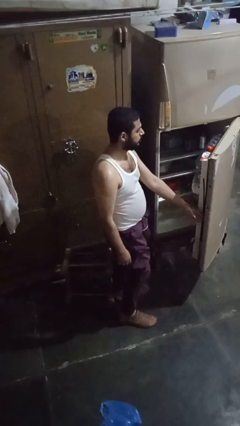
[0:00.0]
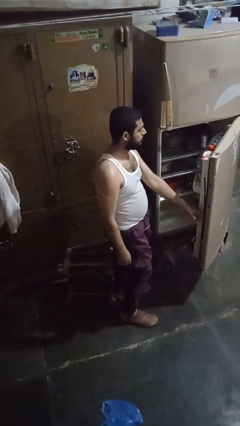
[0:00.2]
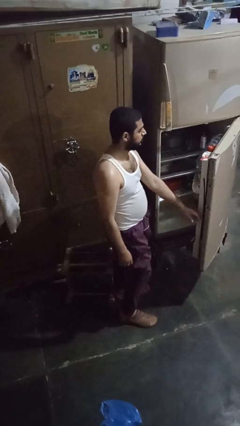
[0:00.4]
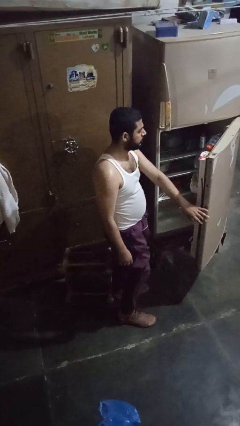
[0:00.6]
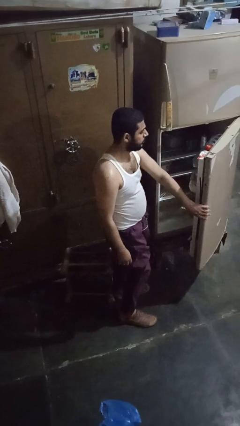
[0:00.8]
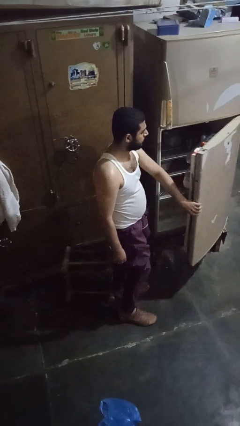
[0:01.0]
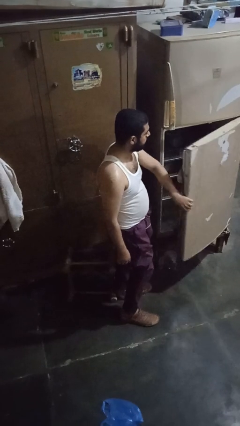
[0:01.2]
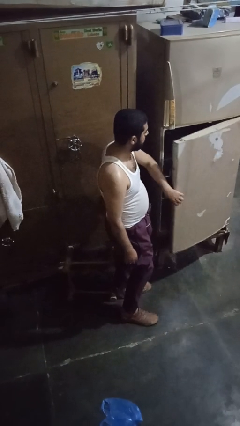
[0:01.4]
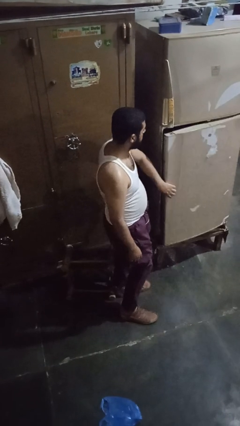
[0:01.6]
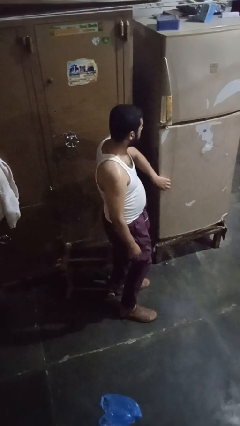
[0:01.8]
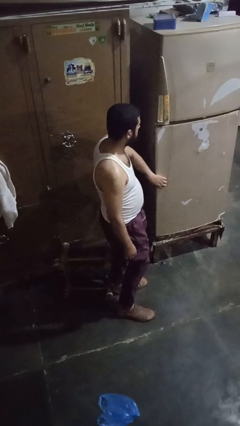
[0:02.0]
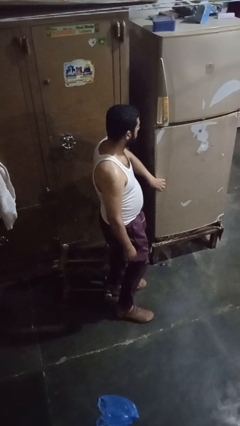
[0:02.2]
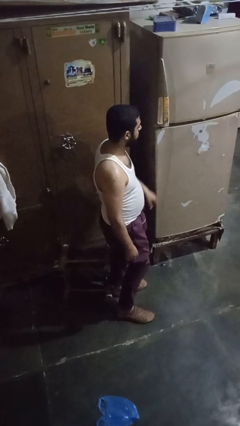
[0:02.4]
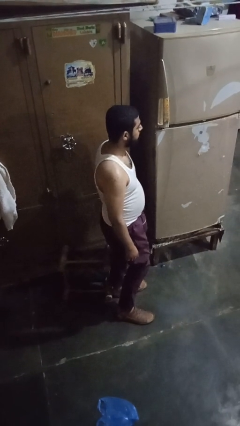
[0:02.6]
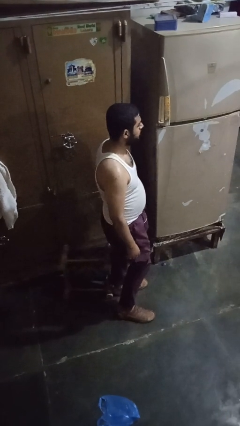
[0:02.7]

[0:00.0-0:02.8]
person closes refrigerator

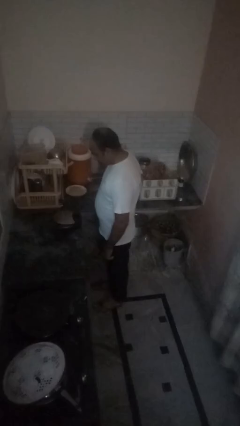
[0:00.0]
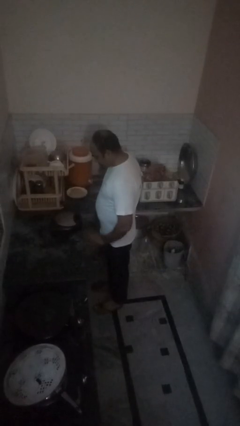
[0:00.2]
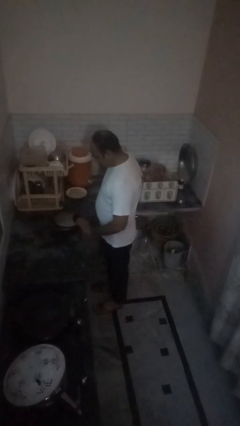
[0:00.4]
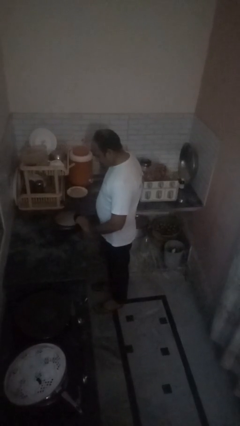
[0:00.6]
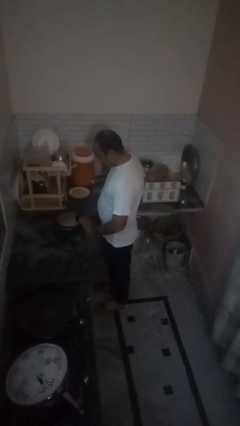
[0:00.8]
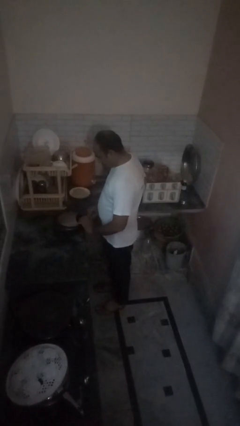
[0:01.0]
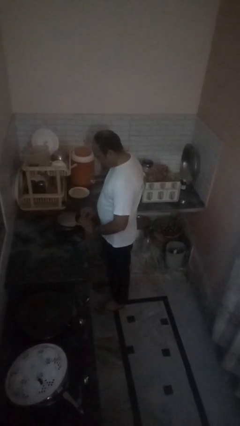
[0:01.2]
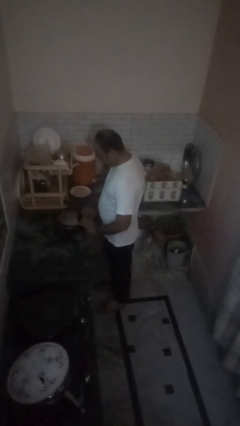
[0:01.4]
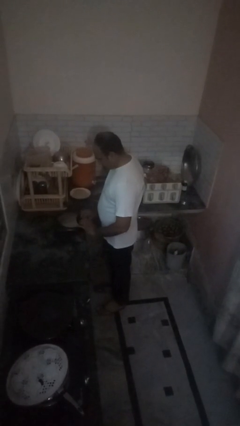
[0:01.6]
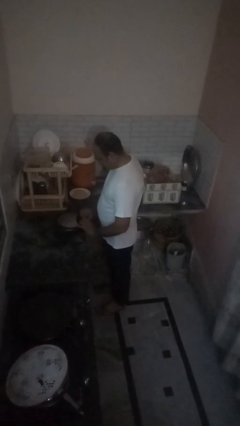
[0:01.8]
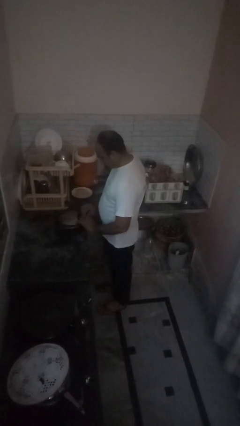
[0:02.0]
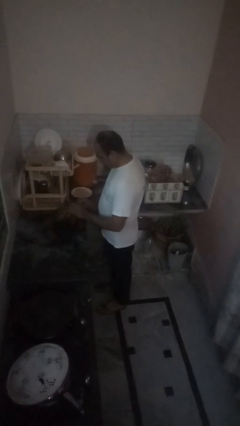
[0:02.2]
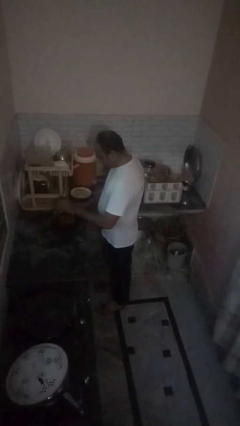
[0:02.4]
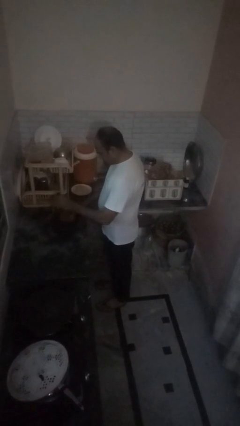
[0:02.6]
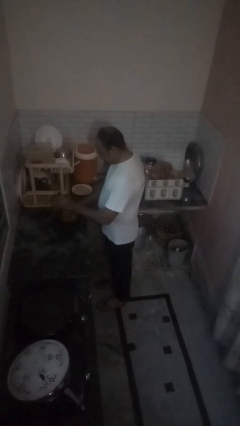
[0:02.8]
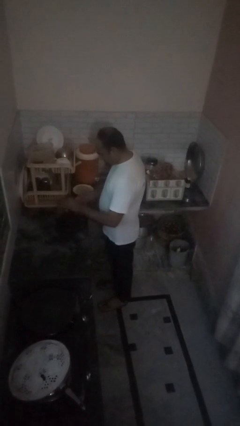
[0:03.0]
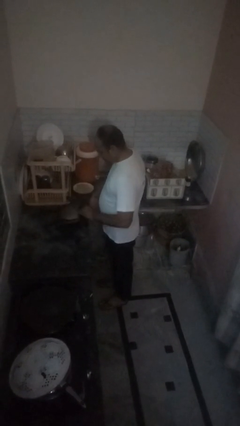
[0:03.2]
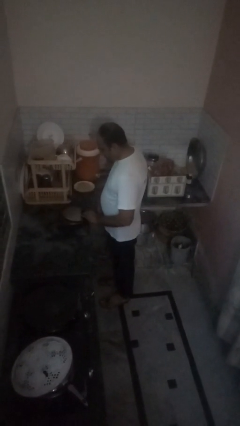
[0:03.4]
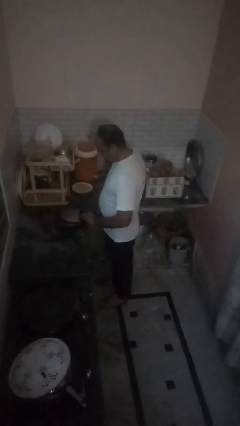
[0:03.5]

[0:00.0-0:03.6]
person takes object from toaster

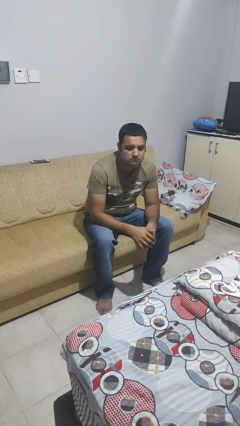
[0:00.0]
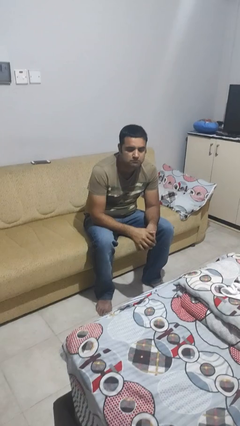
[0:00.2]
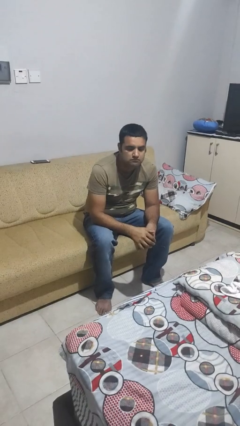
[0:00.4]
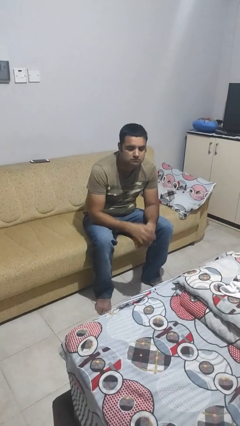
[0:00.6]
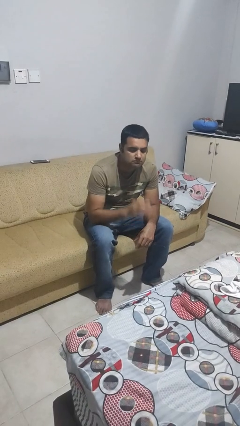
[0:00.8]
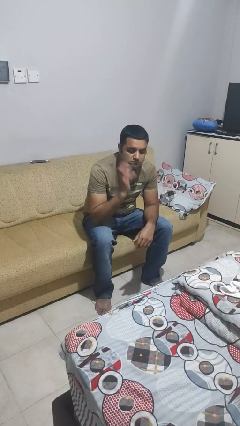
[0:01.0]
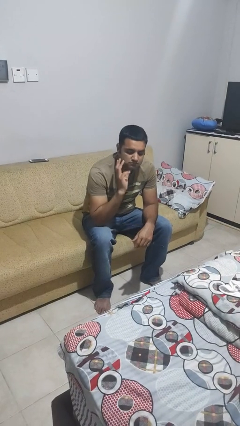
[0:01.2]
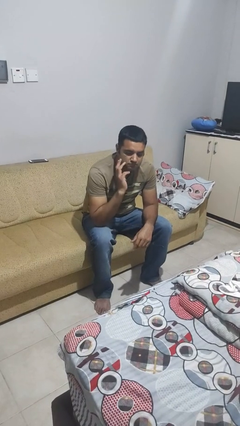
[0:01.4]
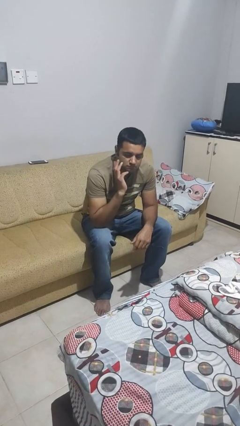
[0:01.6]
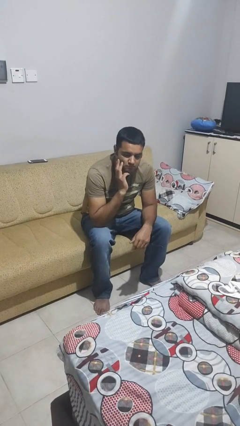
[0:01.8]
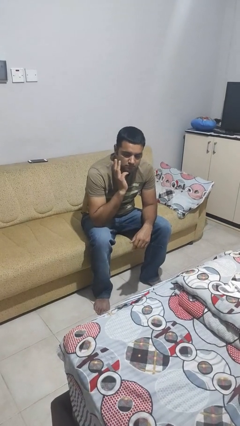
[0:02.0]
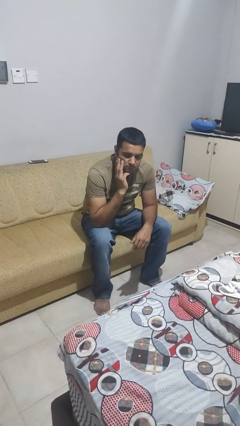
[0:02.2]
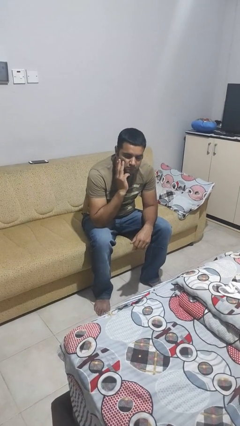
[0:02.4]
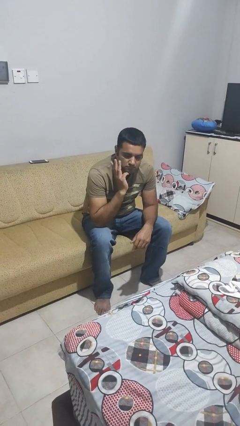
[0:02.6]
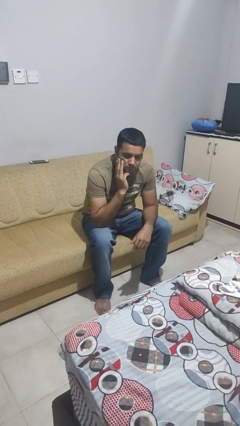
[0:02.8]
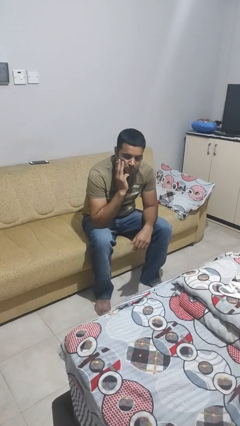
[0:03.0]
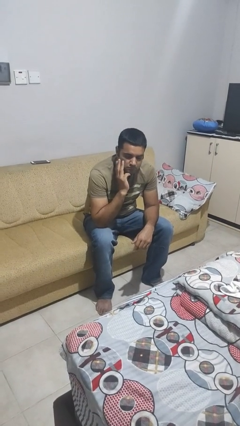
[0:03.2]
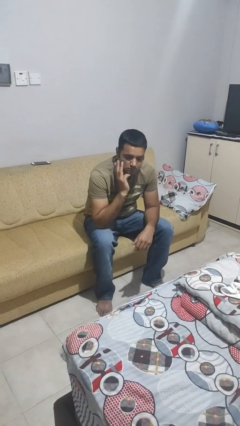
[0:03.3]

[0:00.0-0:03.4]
person strokes chin

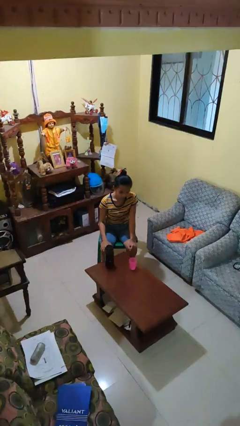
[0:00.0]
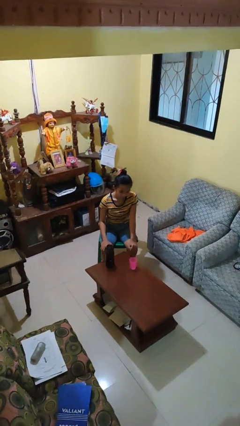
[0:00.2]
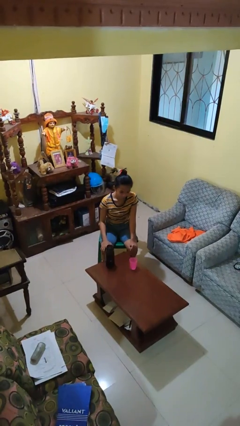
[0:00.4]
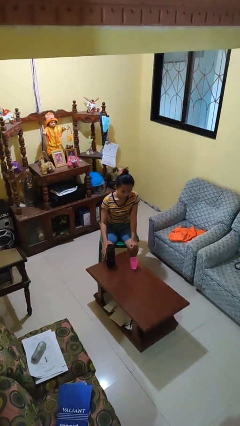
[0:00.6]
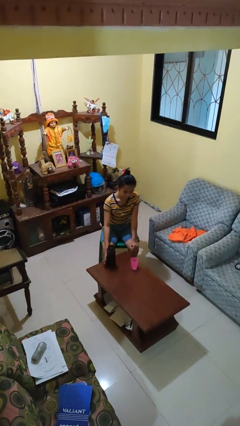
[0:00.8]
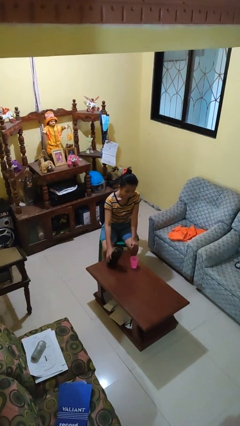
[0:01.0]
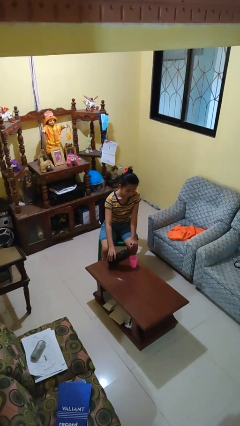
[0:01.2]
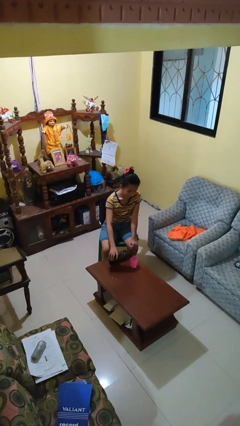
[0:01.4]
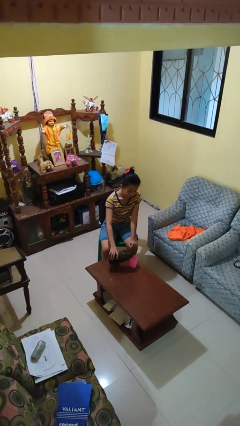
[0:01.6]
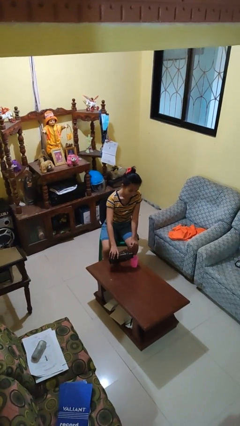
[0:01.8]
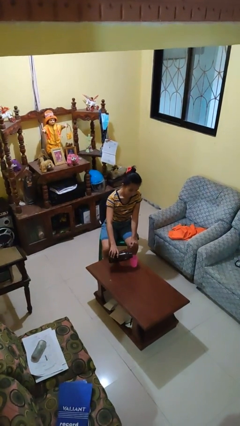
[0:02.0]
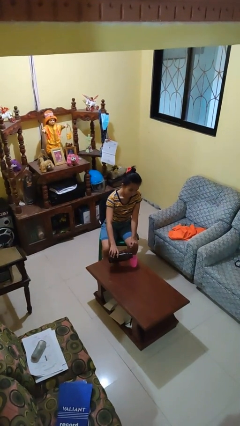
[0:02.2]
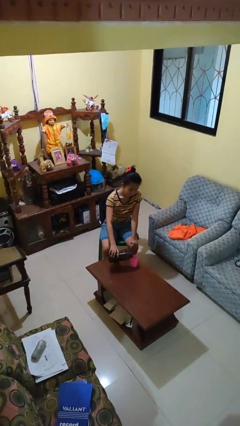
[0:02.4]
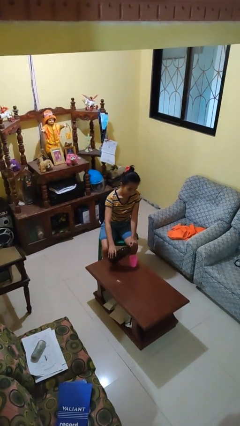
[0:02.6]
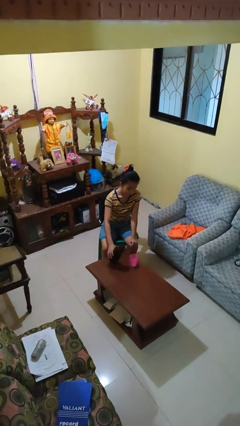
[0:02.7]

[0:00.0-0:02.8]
person pours liquid into cup

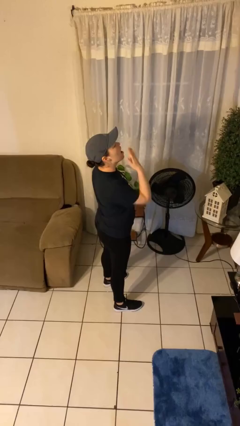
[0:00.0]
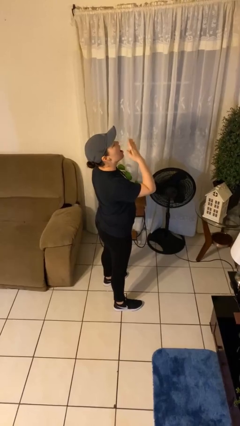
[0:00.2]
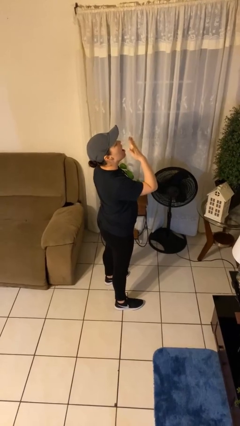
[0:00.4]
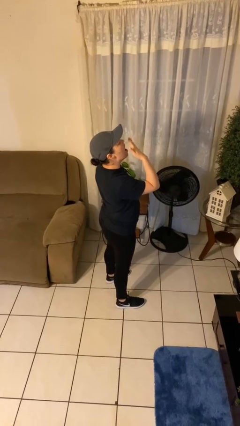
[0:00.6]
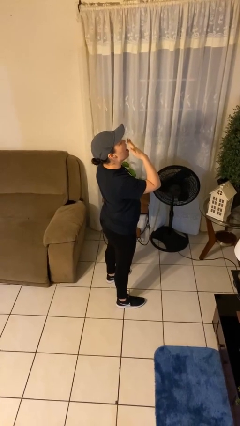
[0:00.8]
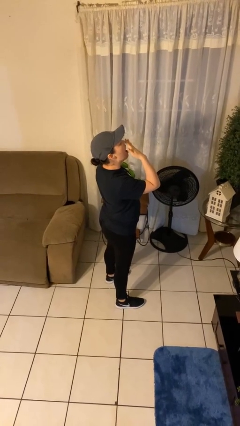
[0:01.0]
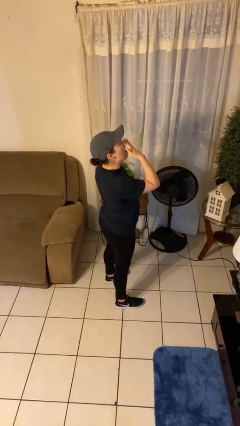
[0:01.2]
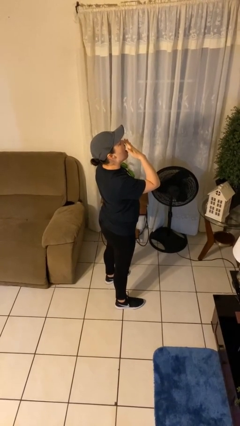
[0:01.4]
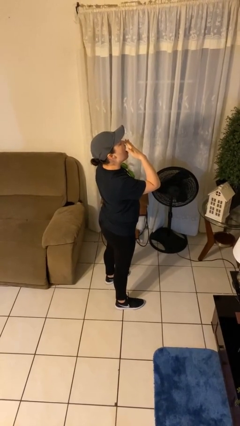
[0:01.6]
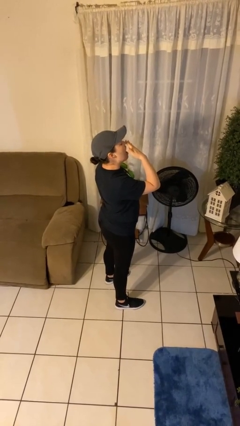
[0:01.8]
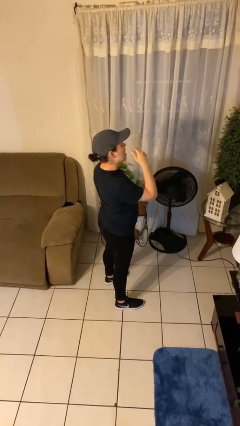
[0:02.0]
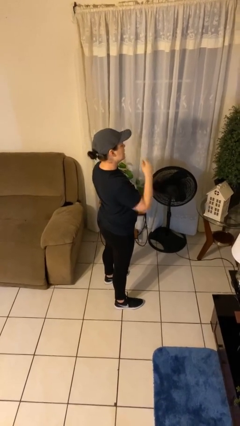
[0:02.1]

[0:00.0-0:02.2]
person yawns

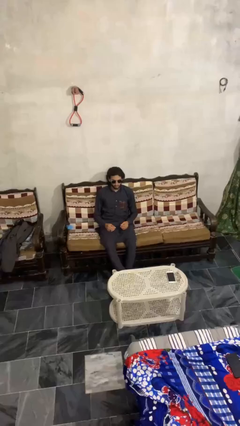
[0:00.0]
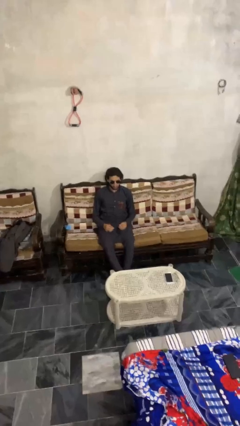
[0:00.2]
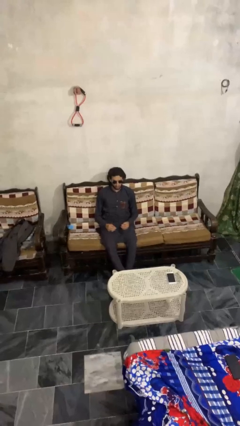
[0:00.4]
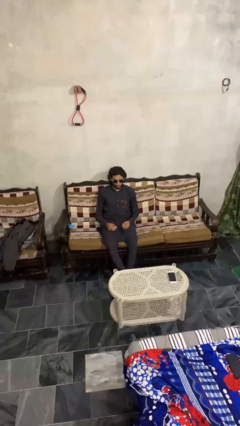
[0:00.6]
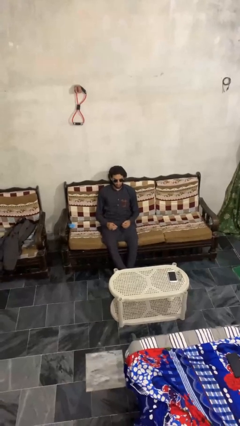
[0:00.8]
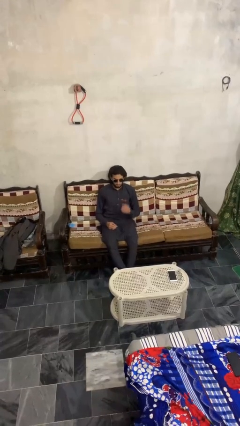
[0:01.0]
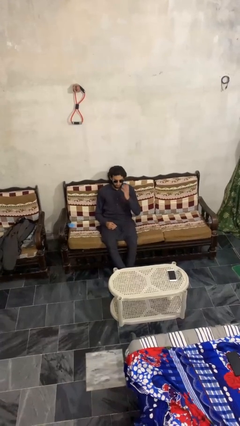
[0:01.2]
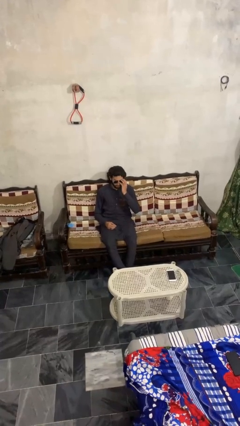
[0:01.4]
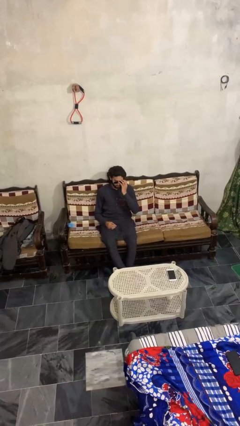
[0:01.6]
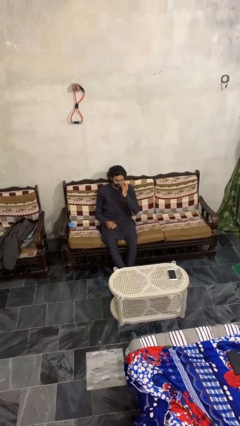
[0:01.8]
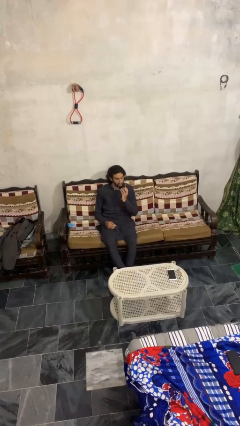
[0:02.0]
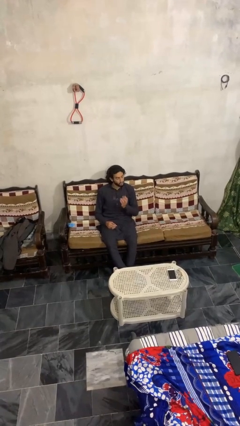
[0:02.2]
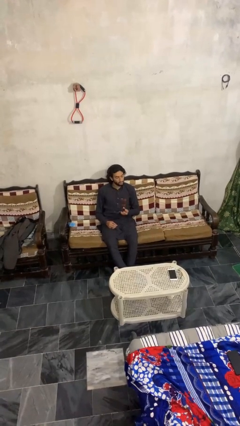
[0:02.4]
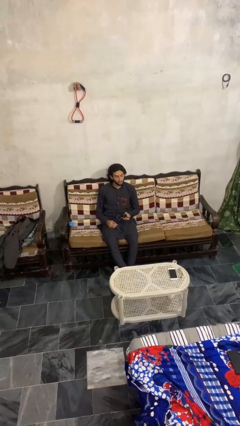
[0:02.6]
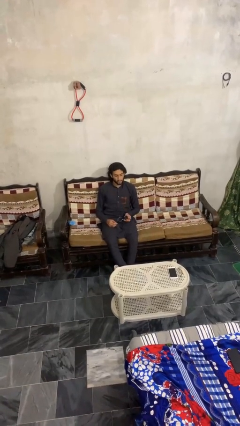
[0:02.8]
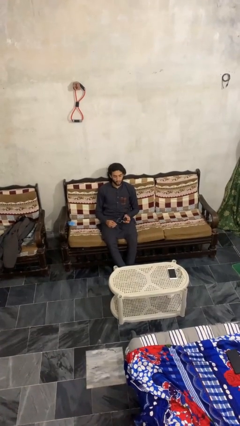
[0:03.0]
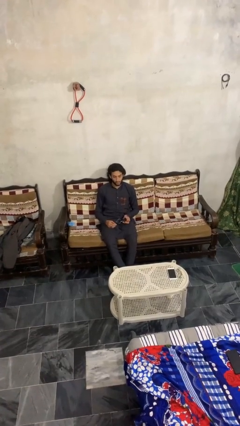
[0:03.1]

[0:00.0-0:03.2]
person takes off sunglasses
